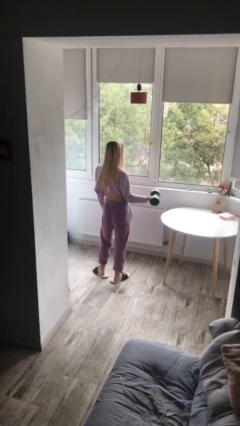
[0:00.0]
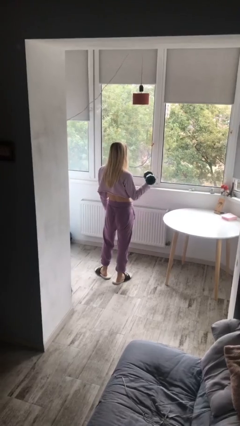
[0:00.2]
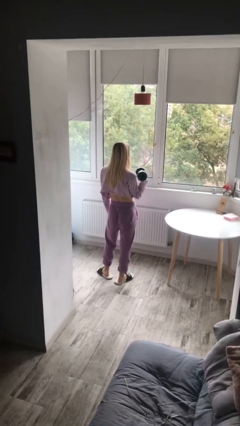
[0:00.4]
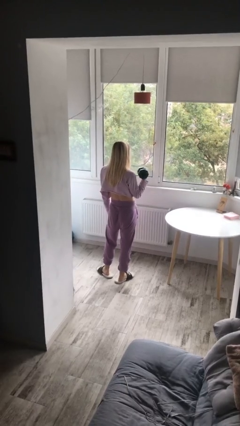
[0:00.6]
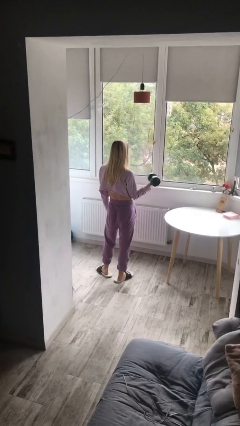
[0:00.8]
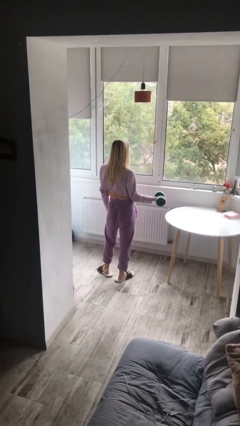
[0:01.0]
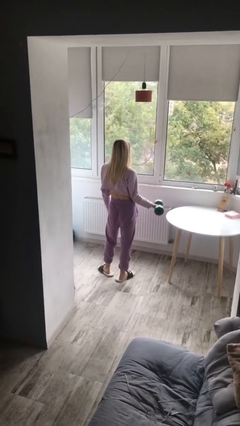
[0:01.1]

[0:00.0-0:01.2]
person lifts dumbbells

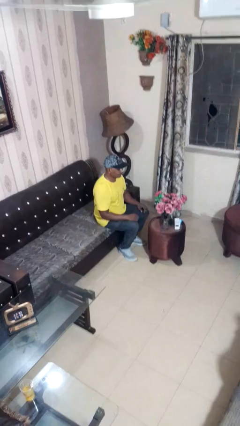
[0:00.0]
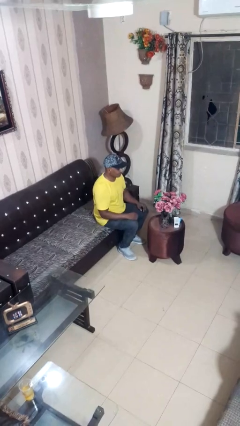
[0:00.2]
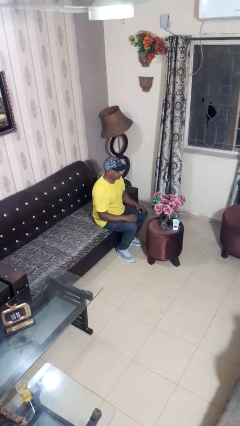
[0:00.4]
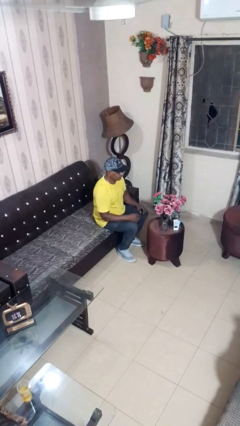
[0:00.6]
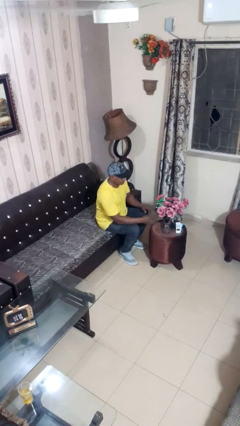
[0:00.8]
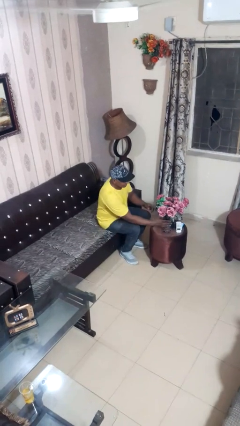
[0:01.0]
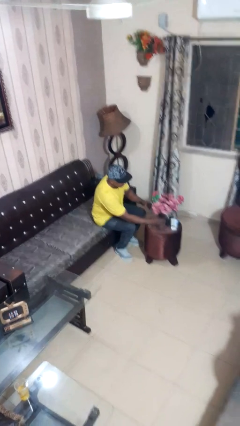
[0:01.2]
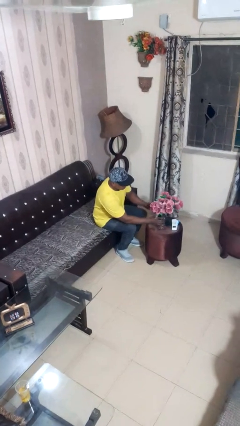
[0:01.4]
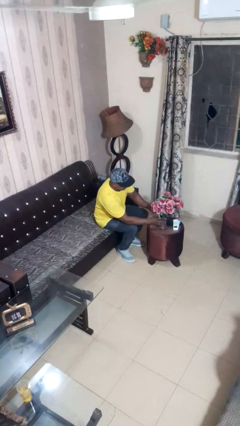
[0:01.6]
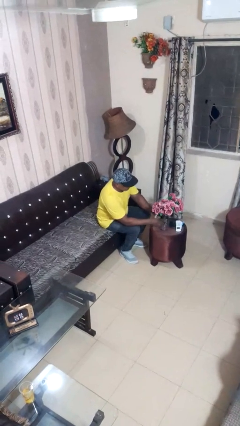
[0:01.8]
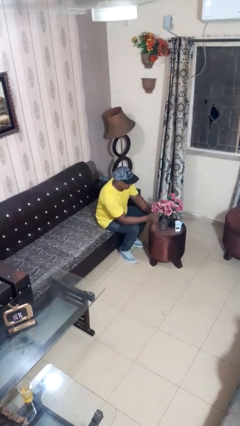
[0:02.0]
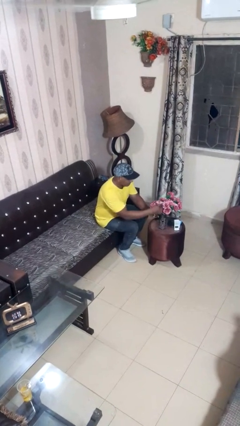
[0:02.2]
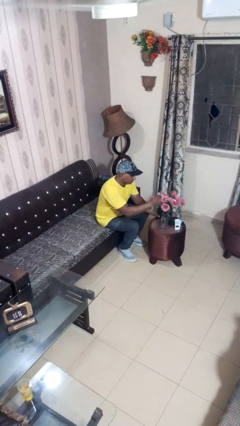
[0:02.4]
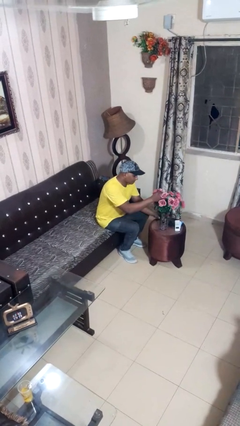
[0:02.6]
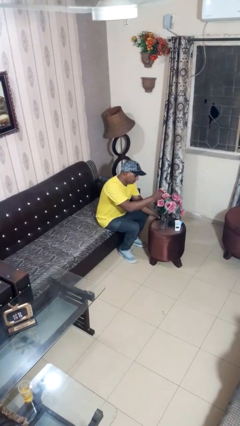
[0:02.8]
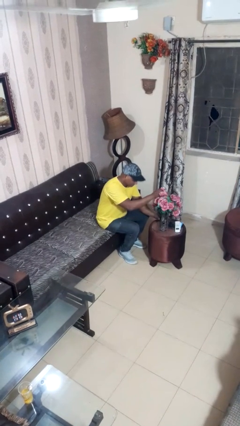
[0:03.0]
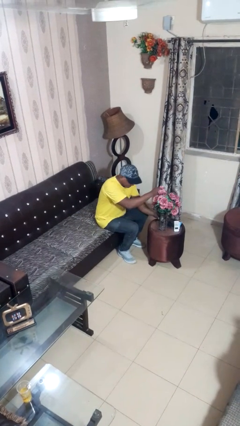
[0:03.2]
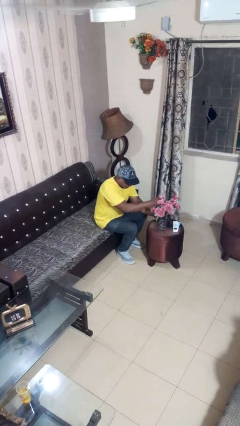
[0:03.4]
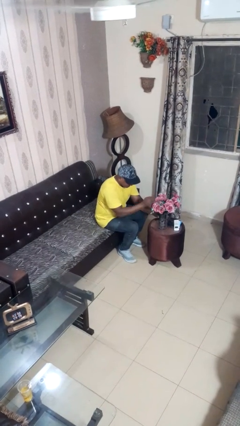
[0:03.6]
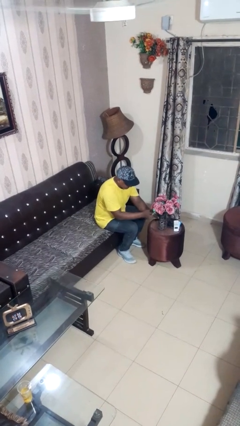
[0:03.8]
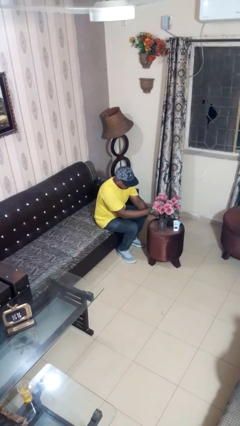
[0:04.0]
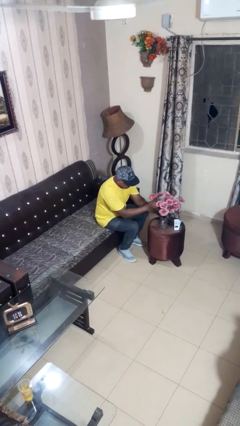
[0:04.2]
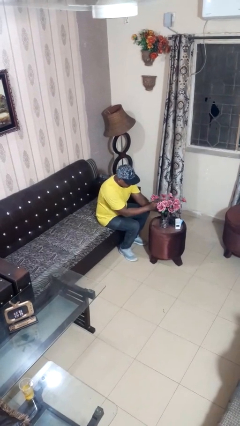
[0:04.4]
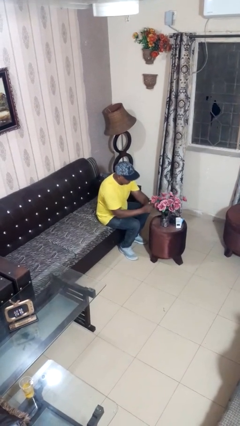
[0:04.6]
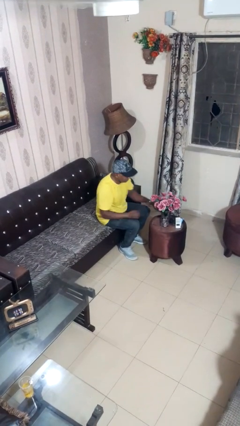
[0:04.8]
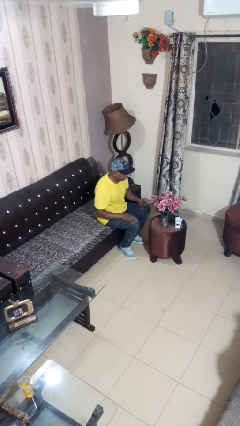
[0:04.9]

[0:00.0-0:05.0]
person arranges flowers in vase

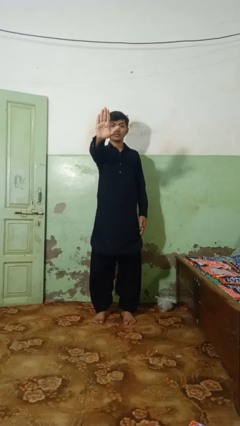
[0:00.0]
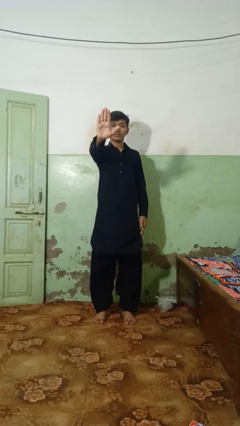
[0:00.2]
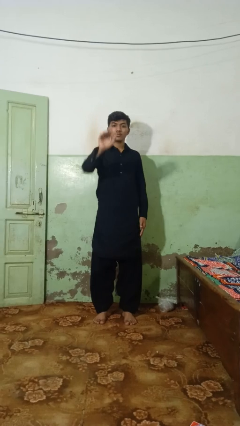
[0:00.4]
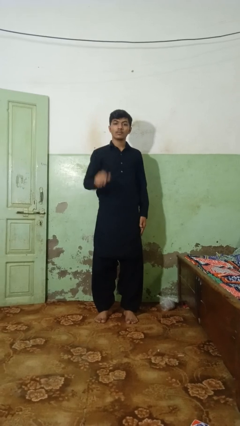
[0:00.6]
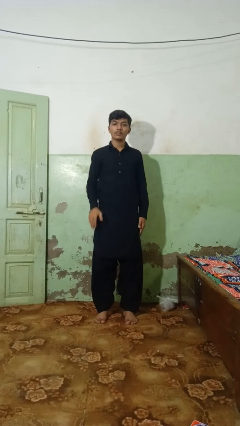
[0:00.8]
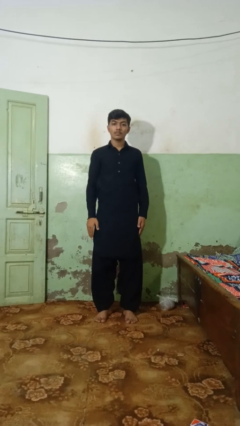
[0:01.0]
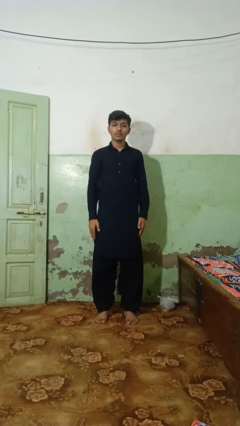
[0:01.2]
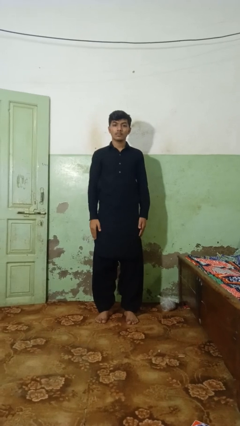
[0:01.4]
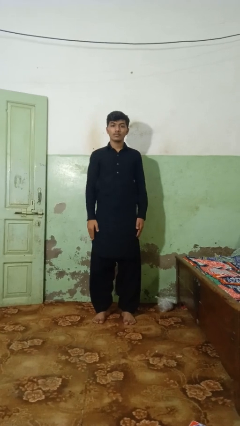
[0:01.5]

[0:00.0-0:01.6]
person gestures stop

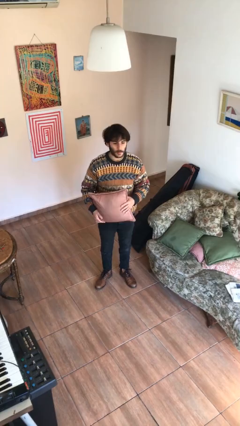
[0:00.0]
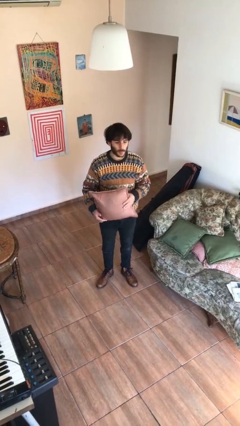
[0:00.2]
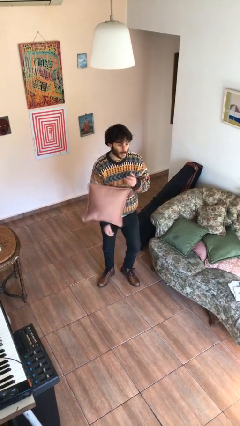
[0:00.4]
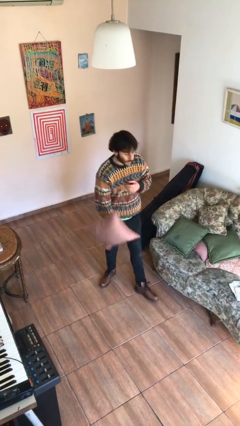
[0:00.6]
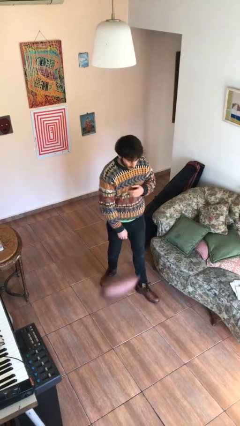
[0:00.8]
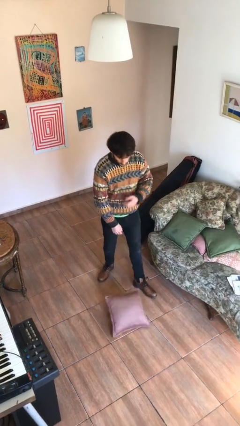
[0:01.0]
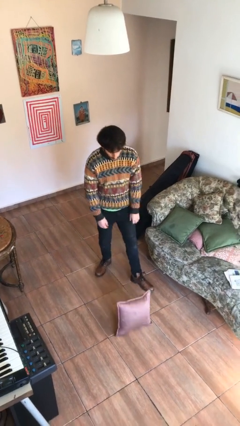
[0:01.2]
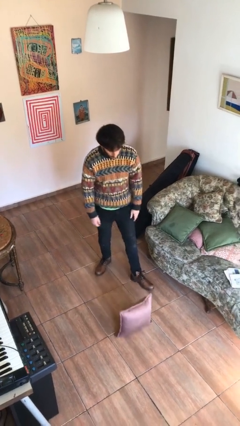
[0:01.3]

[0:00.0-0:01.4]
person drops object

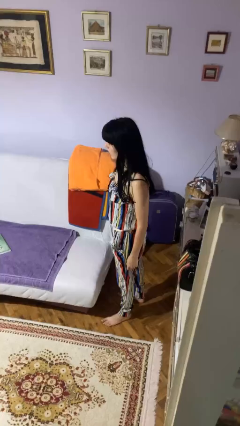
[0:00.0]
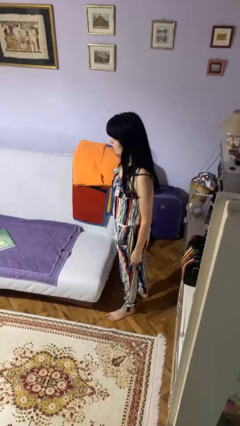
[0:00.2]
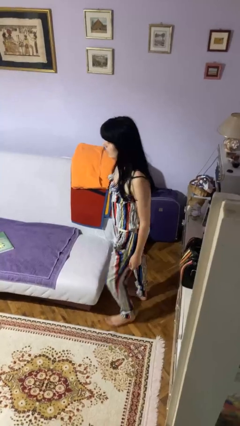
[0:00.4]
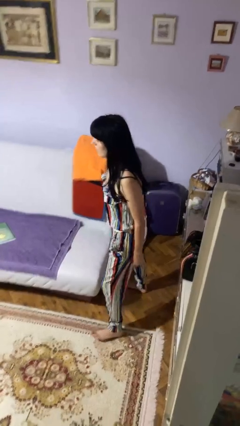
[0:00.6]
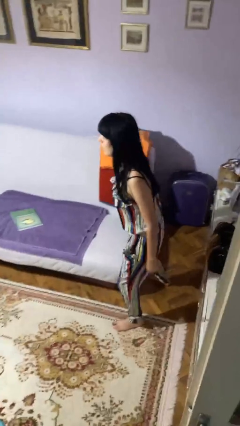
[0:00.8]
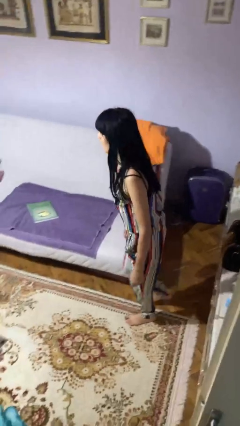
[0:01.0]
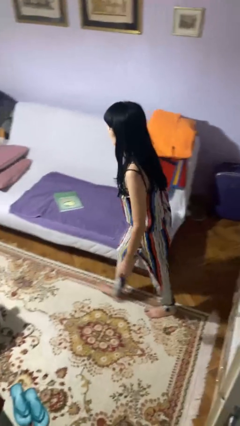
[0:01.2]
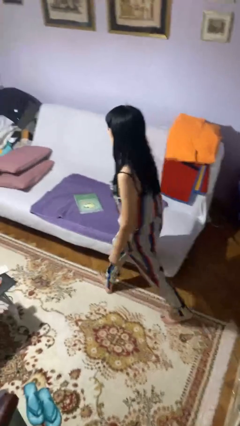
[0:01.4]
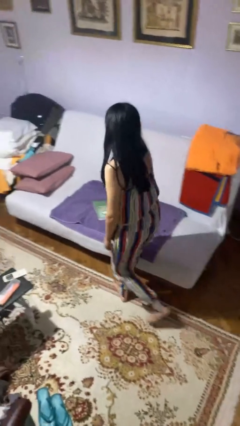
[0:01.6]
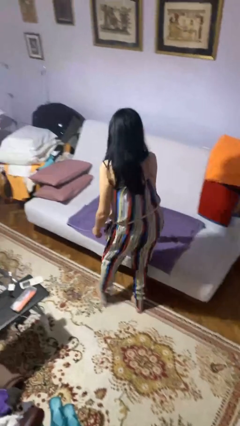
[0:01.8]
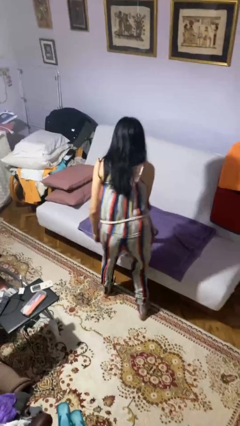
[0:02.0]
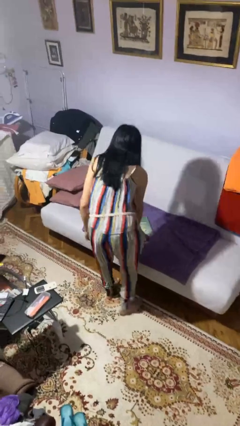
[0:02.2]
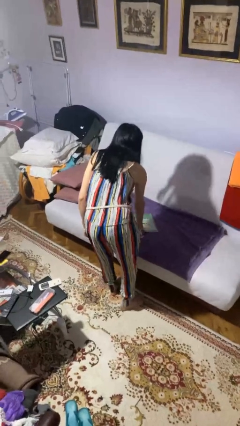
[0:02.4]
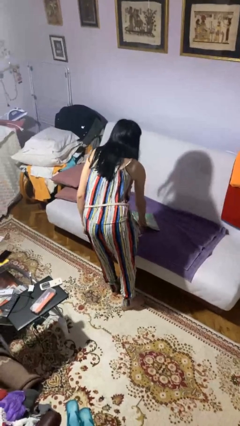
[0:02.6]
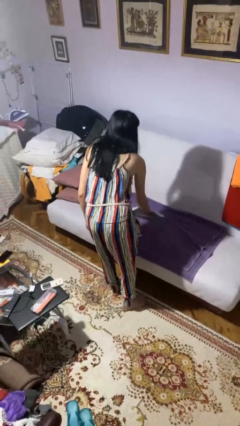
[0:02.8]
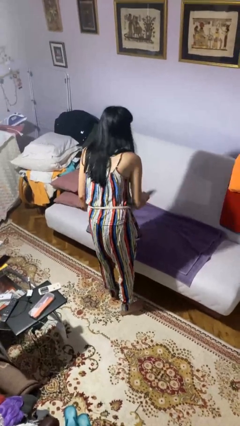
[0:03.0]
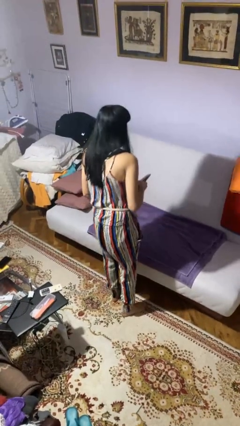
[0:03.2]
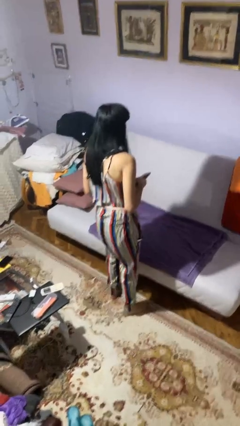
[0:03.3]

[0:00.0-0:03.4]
person picks up object from bed

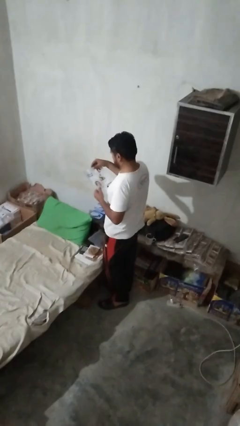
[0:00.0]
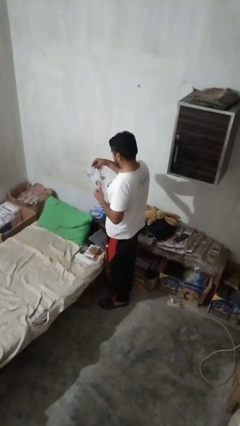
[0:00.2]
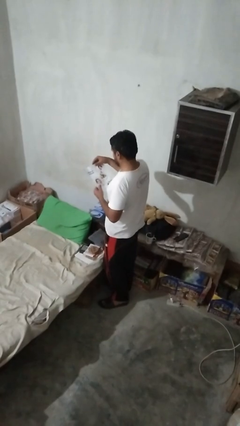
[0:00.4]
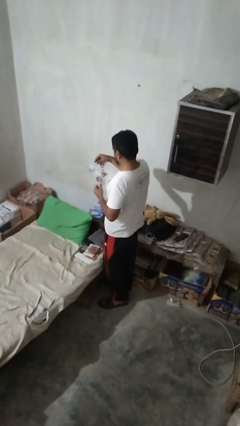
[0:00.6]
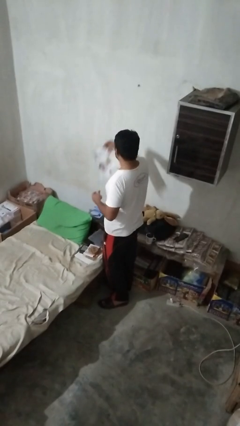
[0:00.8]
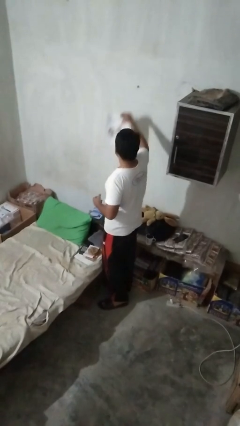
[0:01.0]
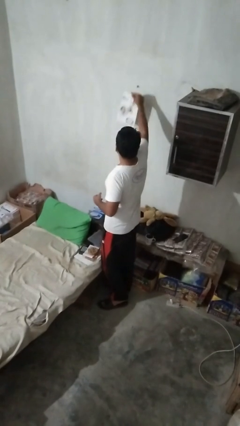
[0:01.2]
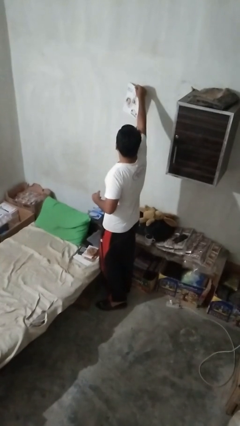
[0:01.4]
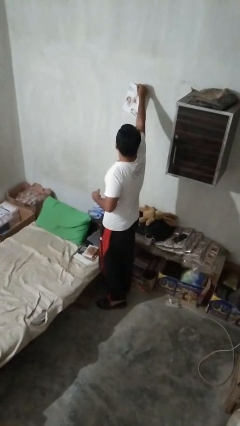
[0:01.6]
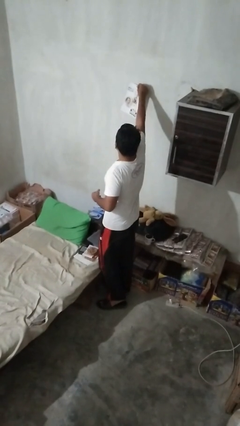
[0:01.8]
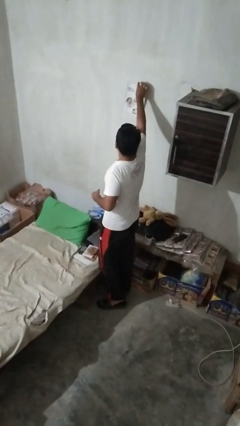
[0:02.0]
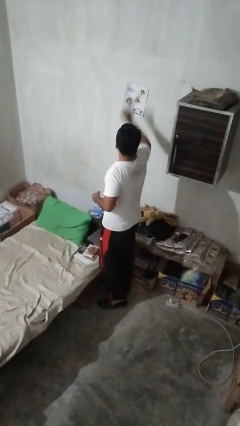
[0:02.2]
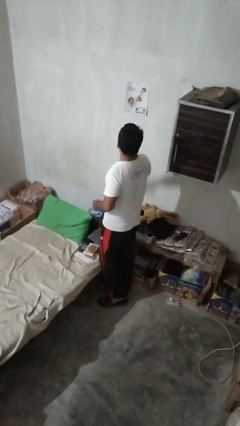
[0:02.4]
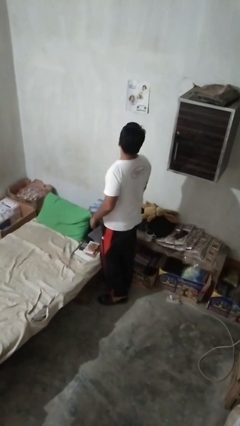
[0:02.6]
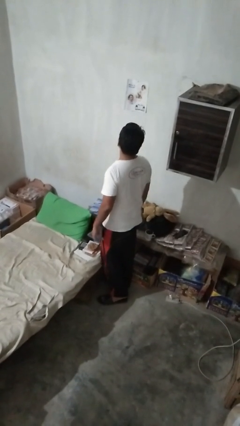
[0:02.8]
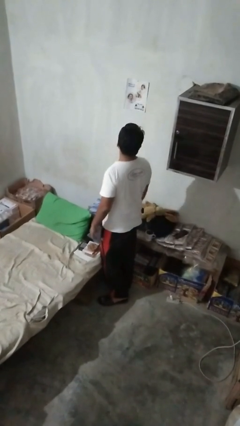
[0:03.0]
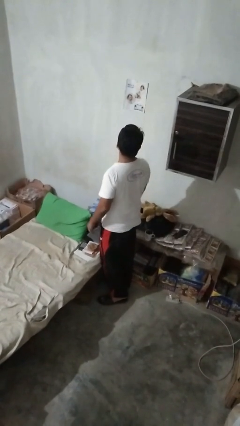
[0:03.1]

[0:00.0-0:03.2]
person puts up picture frame

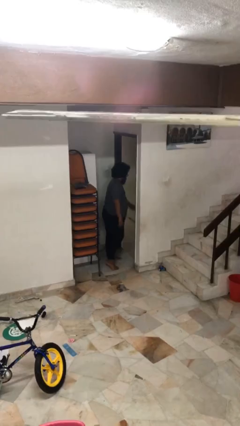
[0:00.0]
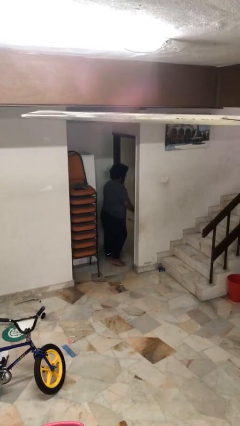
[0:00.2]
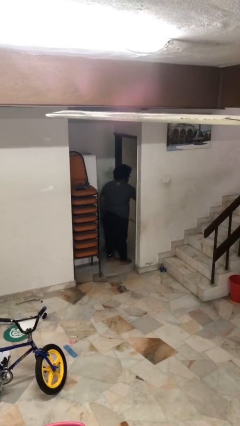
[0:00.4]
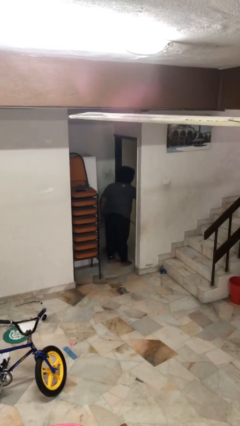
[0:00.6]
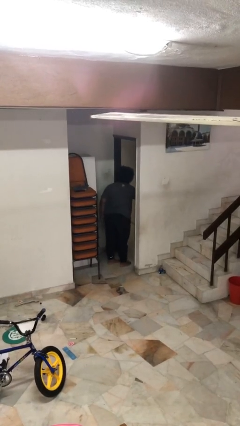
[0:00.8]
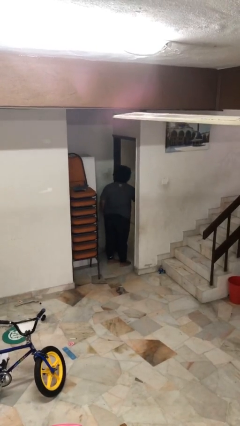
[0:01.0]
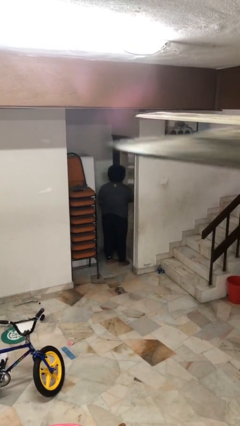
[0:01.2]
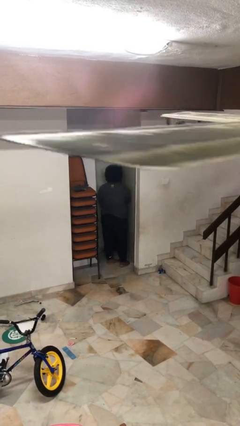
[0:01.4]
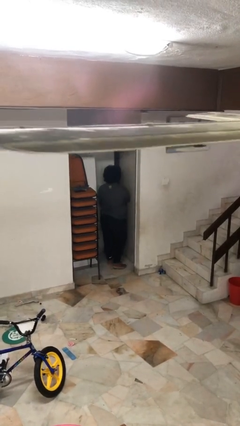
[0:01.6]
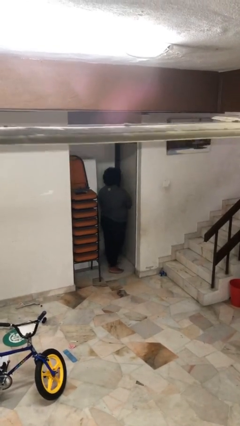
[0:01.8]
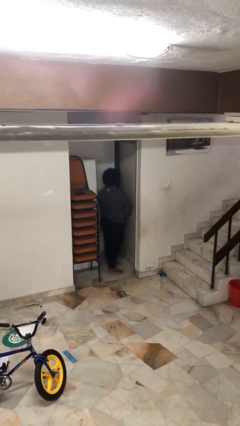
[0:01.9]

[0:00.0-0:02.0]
person closes facility door
